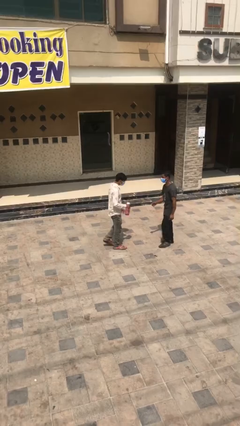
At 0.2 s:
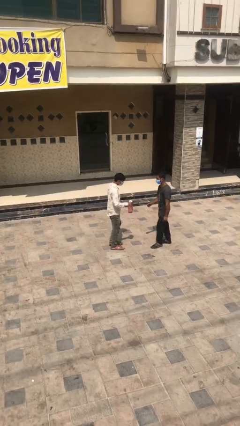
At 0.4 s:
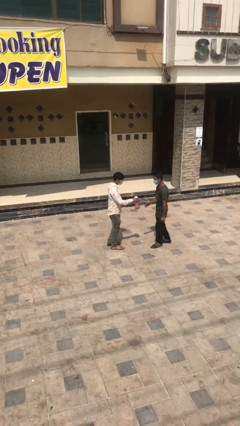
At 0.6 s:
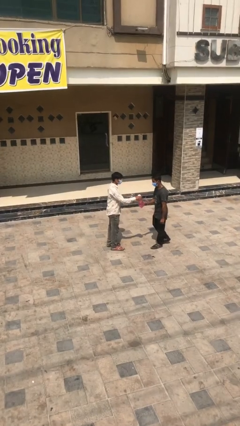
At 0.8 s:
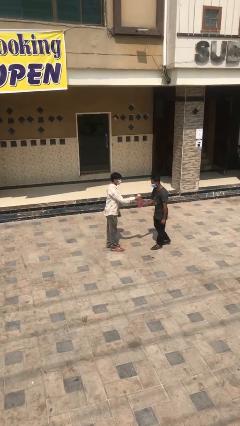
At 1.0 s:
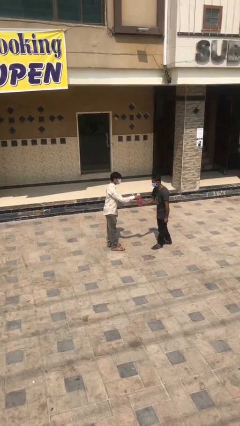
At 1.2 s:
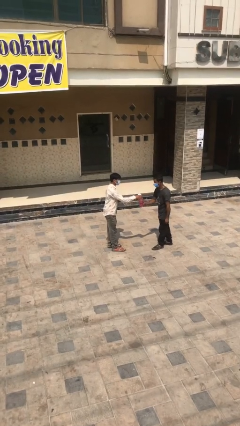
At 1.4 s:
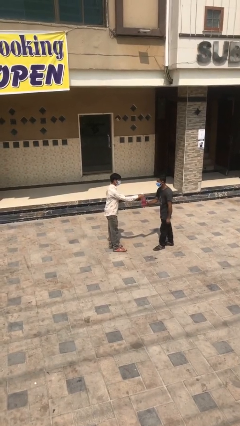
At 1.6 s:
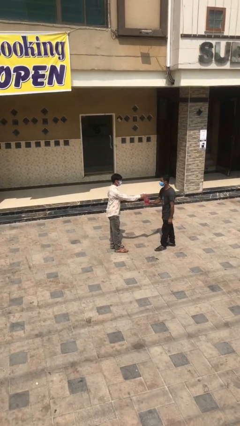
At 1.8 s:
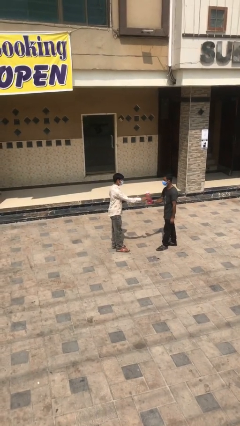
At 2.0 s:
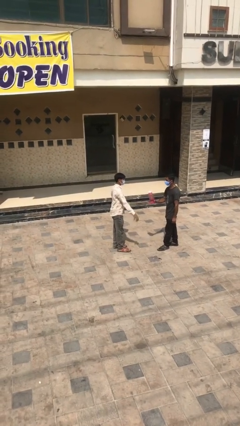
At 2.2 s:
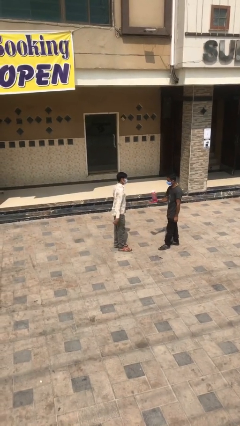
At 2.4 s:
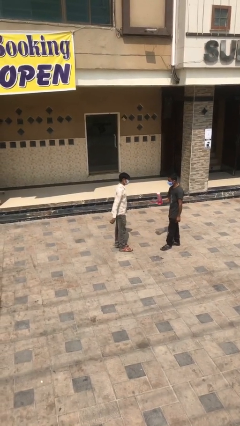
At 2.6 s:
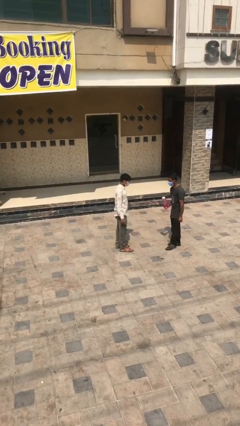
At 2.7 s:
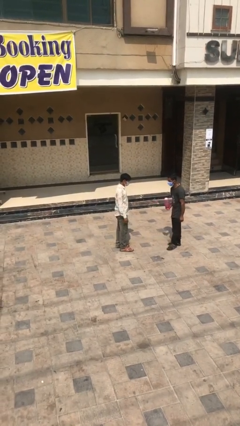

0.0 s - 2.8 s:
person transfers object to person

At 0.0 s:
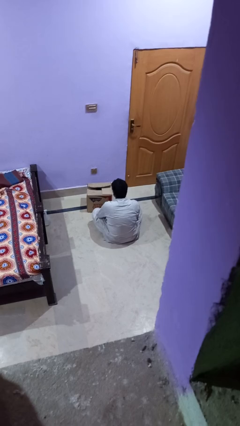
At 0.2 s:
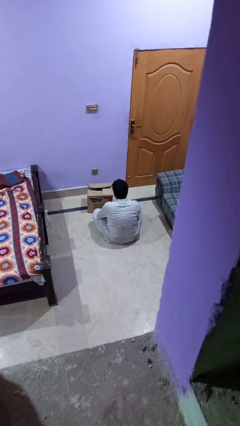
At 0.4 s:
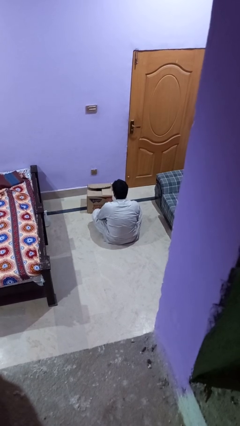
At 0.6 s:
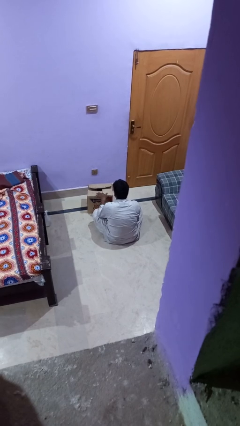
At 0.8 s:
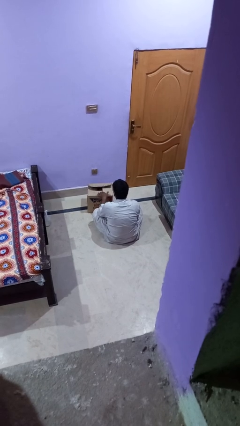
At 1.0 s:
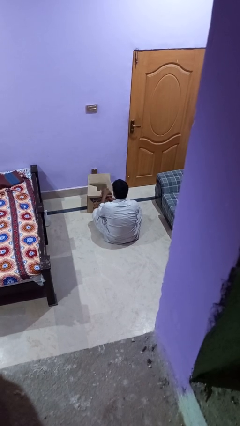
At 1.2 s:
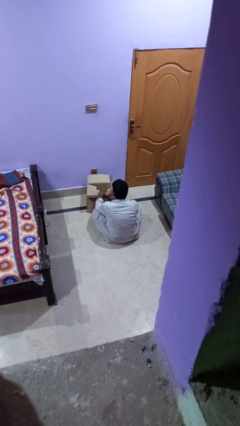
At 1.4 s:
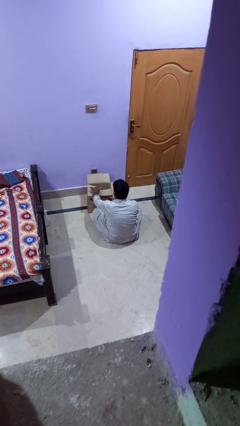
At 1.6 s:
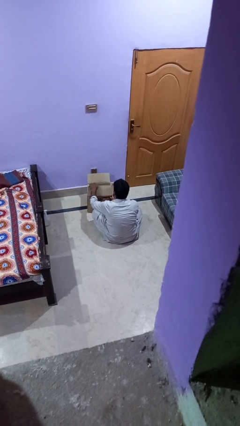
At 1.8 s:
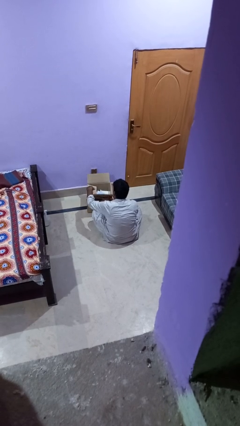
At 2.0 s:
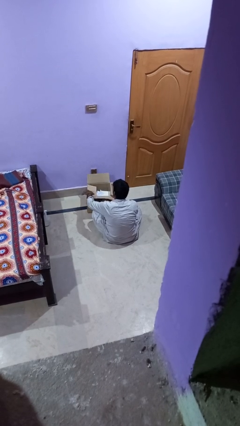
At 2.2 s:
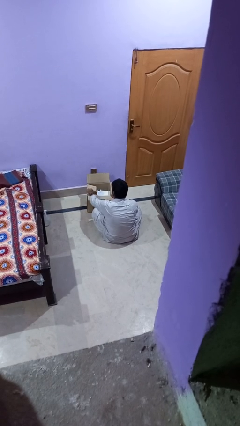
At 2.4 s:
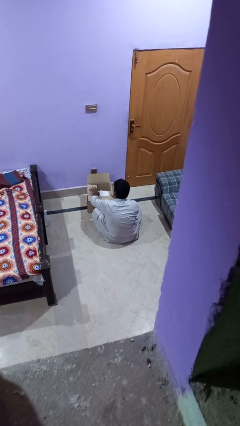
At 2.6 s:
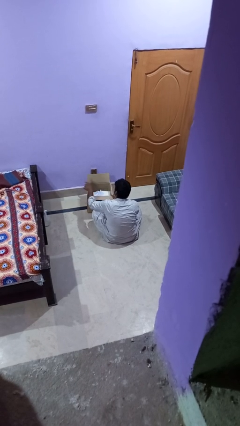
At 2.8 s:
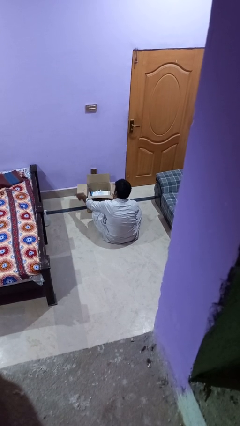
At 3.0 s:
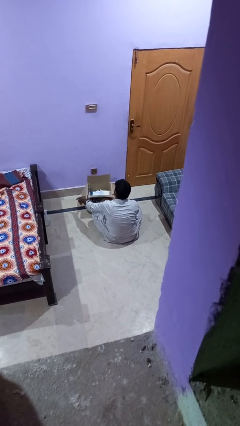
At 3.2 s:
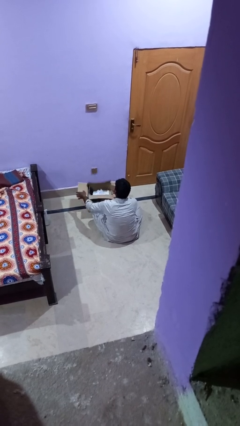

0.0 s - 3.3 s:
person opens box

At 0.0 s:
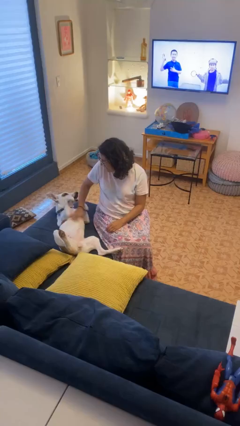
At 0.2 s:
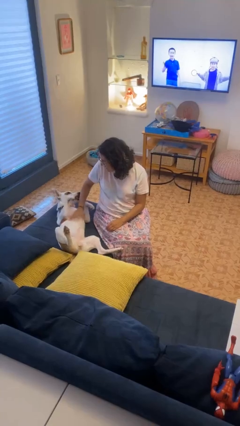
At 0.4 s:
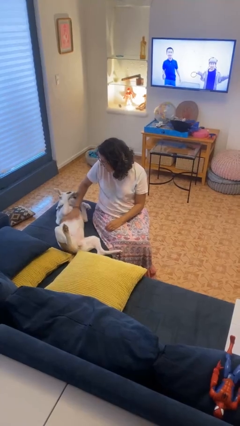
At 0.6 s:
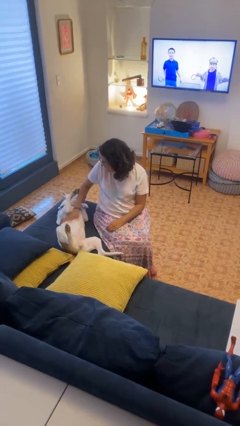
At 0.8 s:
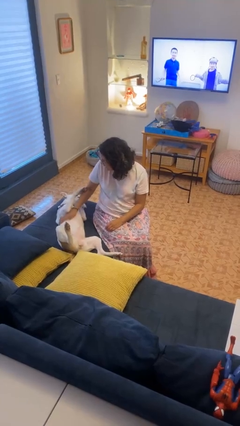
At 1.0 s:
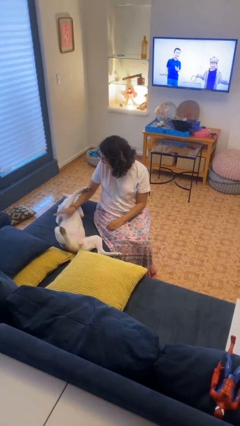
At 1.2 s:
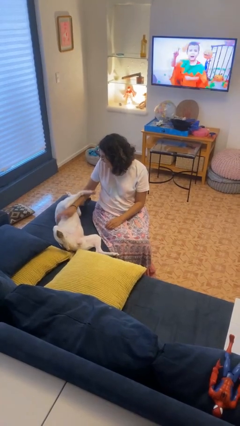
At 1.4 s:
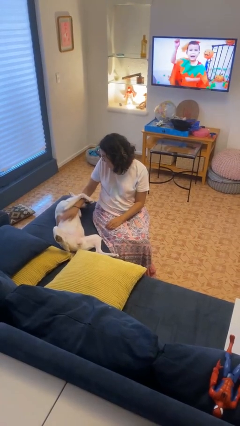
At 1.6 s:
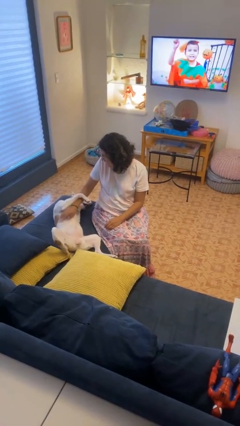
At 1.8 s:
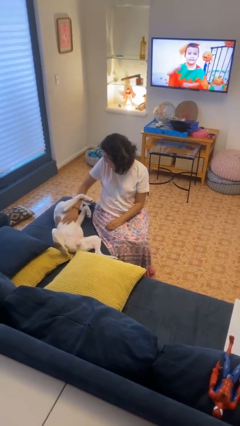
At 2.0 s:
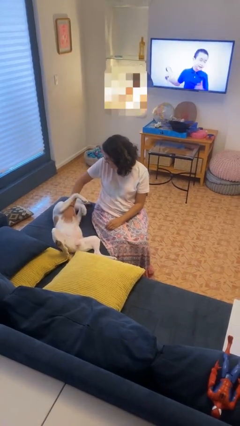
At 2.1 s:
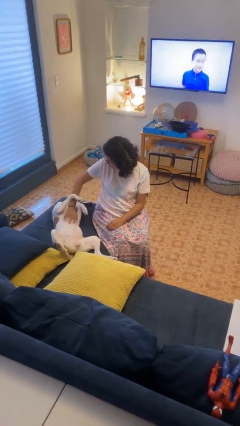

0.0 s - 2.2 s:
person pets dog

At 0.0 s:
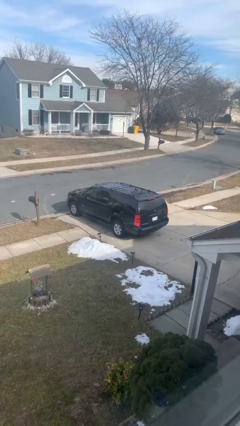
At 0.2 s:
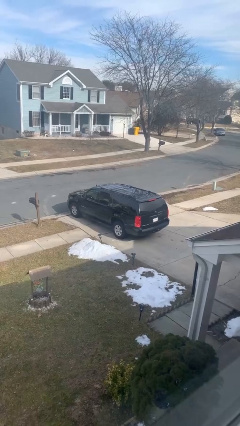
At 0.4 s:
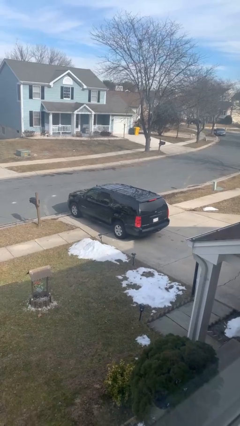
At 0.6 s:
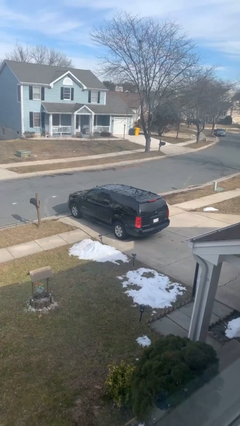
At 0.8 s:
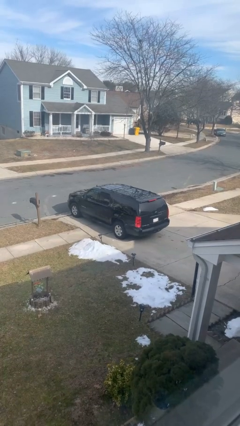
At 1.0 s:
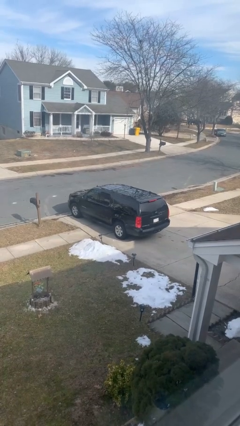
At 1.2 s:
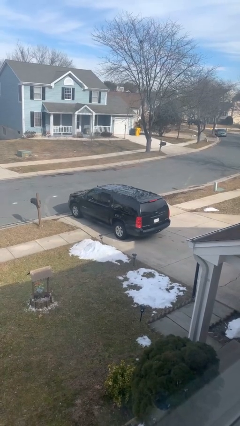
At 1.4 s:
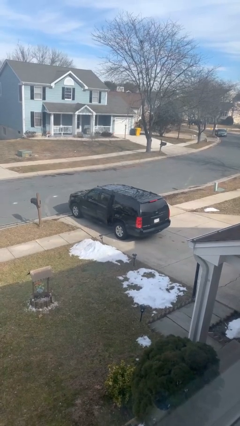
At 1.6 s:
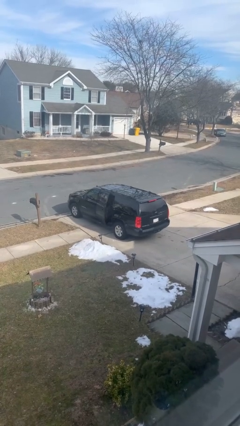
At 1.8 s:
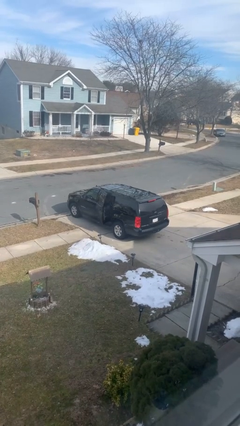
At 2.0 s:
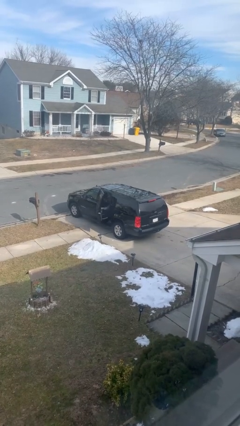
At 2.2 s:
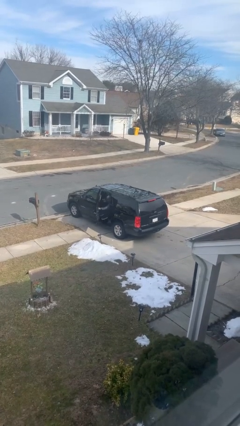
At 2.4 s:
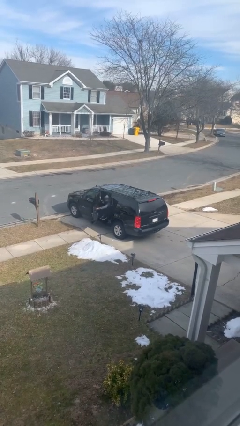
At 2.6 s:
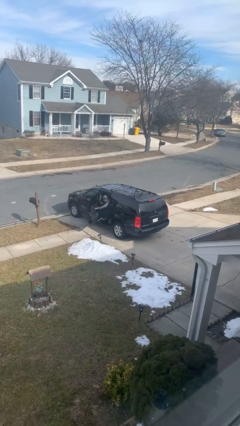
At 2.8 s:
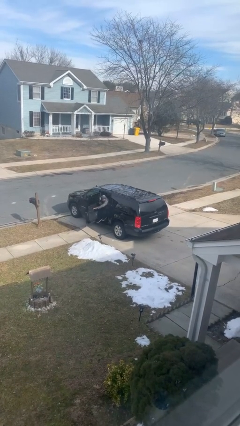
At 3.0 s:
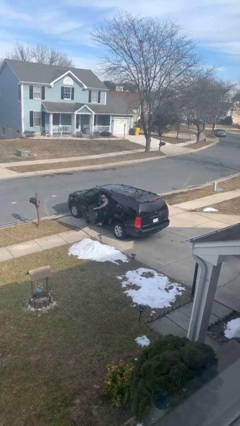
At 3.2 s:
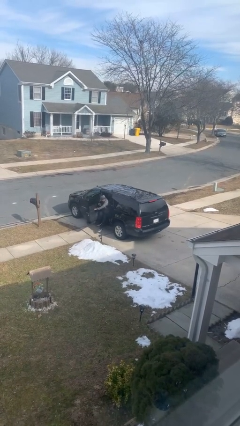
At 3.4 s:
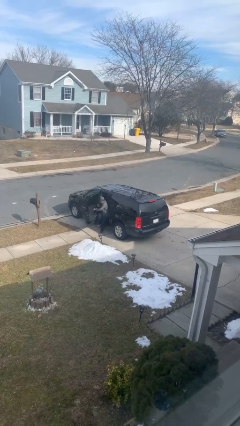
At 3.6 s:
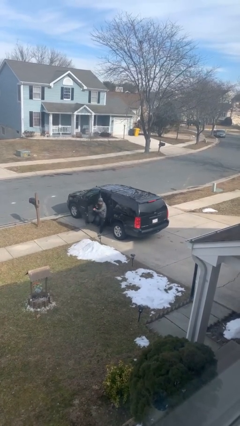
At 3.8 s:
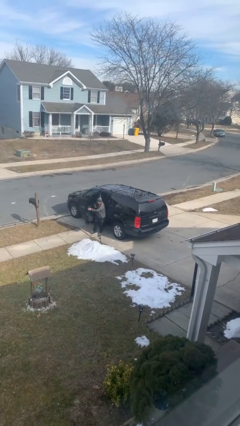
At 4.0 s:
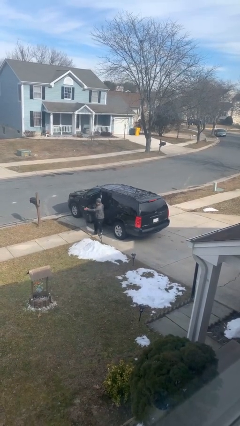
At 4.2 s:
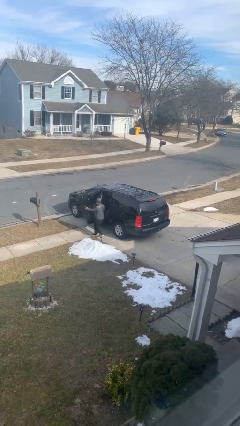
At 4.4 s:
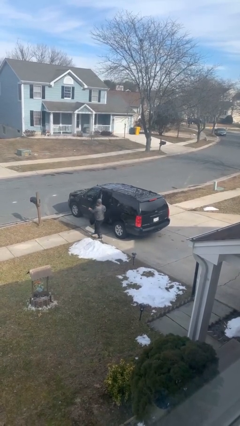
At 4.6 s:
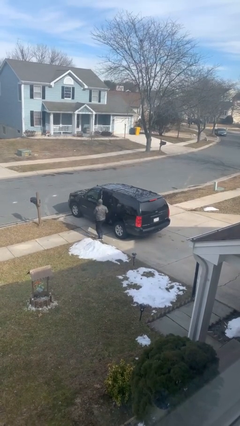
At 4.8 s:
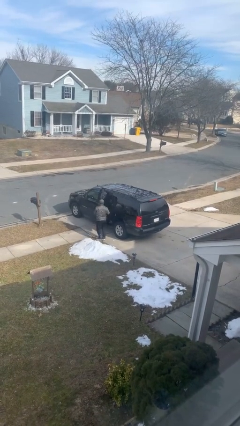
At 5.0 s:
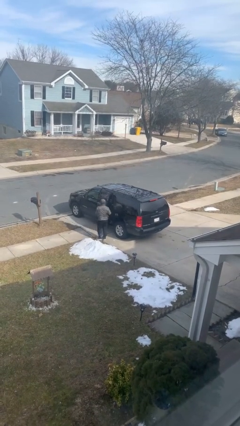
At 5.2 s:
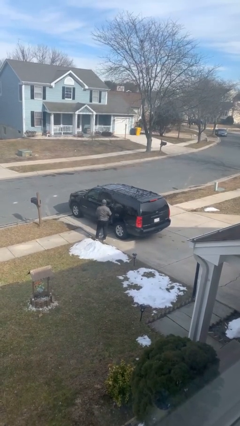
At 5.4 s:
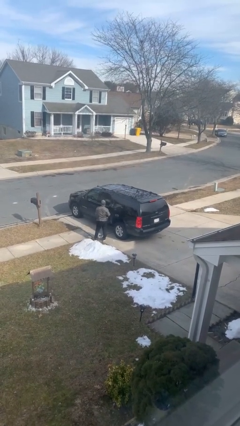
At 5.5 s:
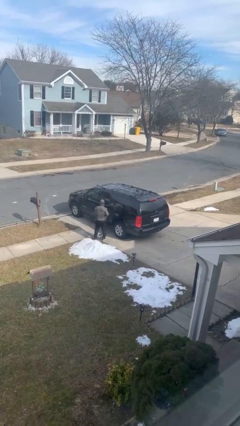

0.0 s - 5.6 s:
car drops off person

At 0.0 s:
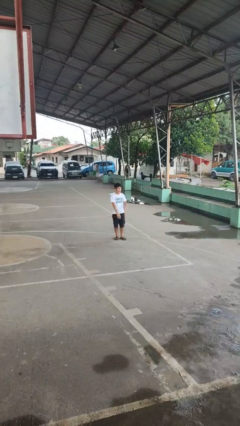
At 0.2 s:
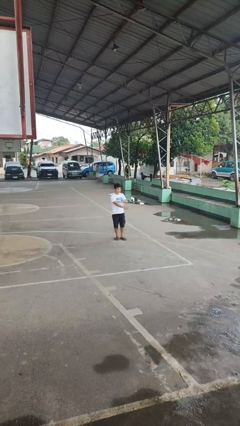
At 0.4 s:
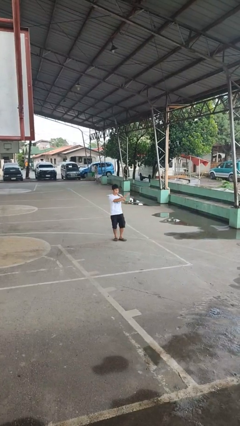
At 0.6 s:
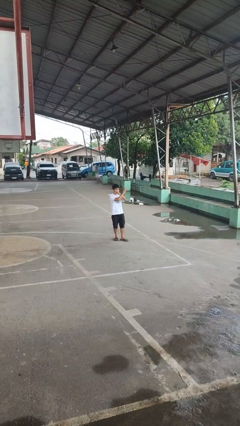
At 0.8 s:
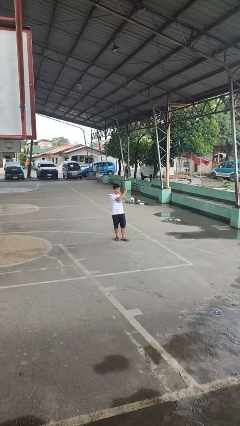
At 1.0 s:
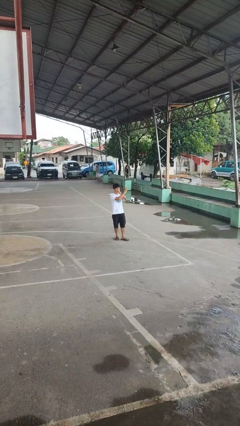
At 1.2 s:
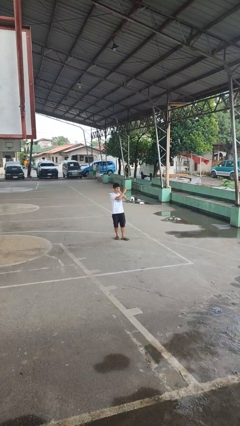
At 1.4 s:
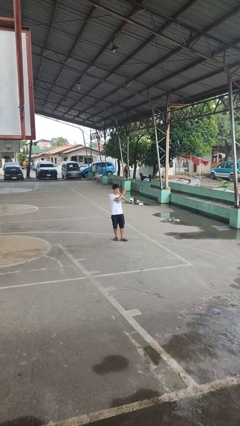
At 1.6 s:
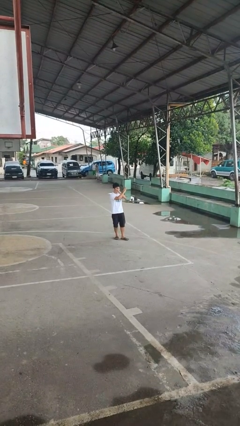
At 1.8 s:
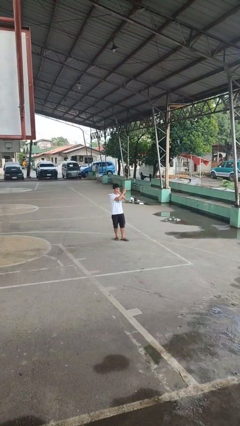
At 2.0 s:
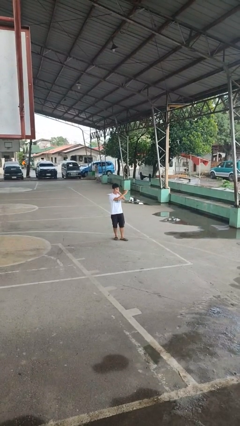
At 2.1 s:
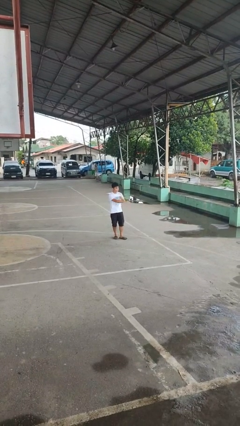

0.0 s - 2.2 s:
person gestures arms x

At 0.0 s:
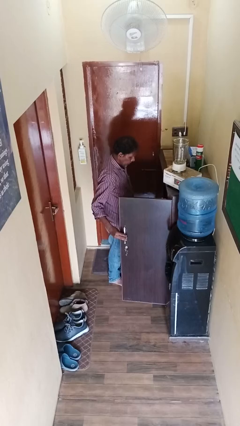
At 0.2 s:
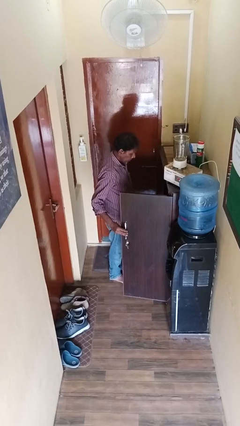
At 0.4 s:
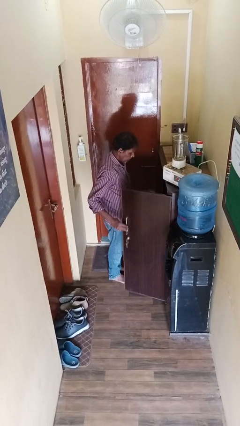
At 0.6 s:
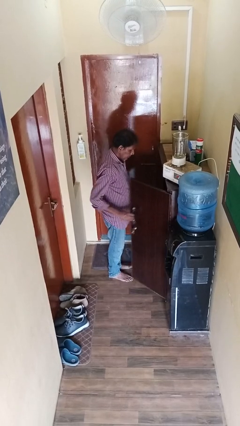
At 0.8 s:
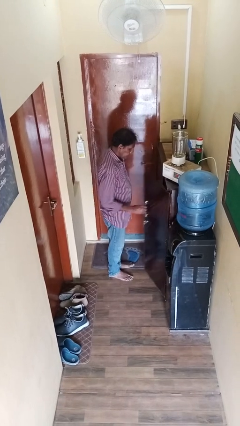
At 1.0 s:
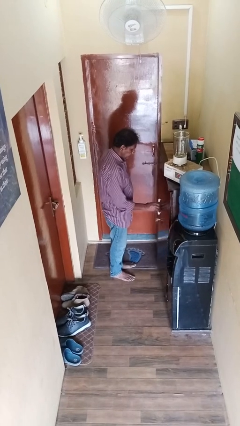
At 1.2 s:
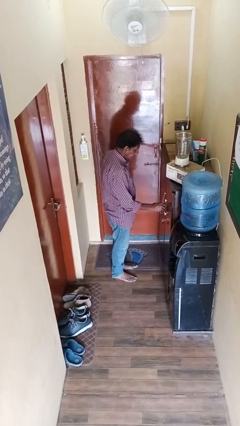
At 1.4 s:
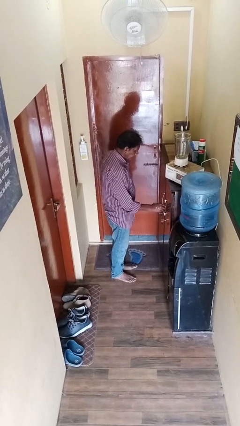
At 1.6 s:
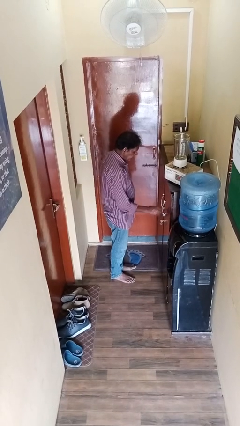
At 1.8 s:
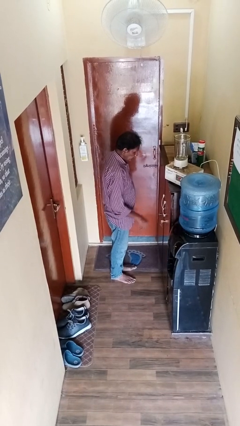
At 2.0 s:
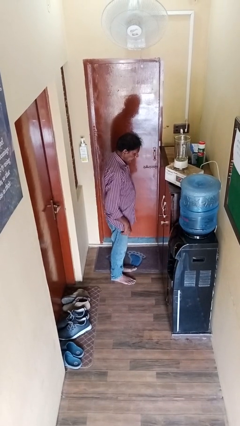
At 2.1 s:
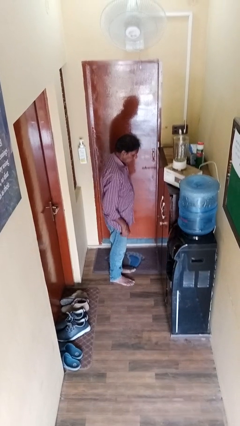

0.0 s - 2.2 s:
person closes cabinet
